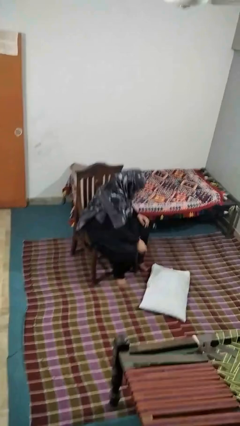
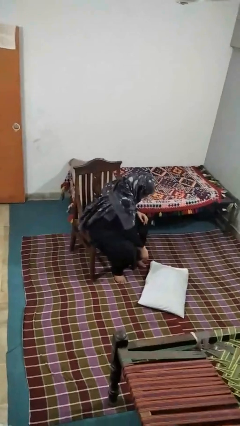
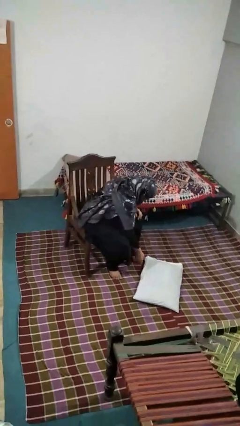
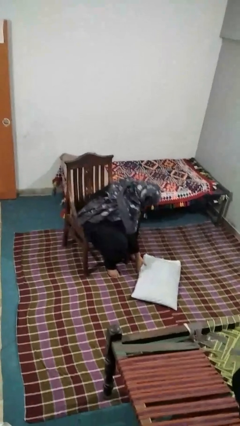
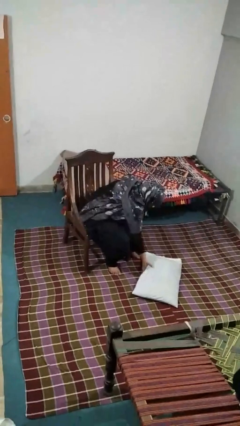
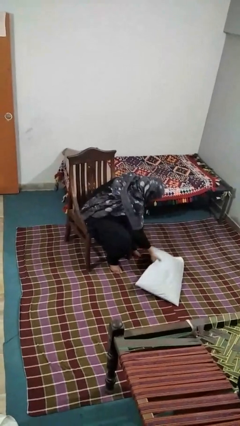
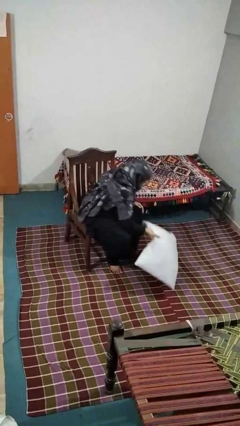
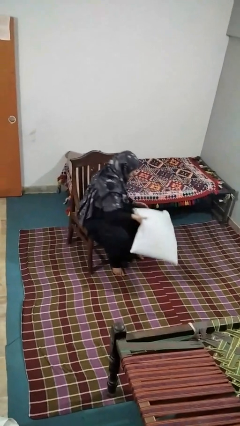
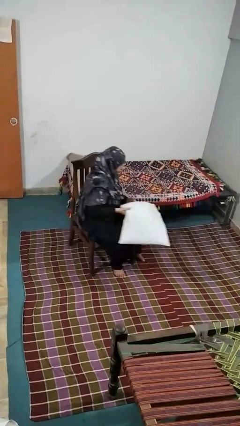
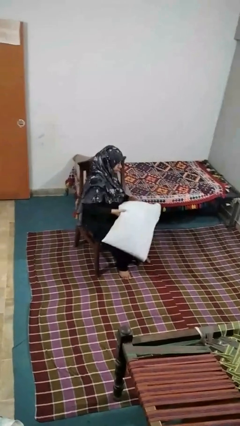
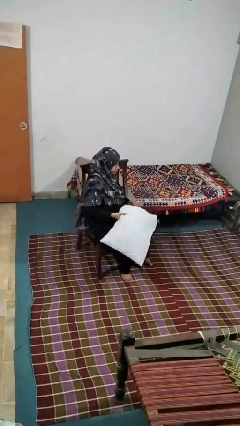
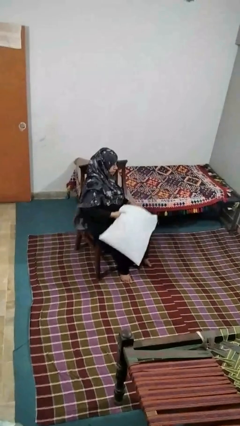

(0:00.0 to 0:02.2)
person picks up object from floor

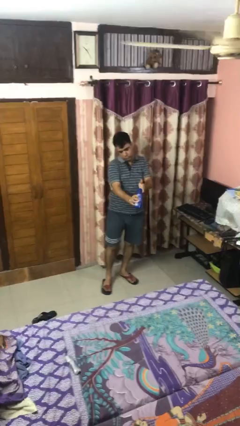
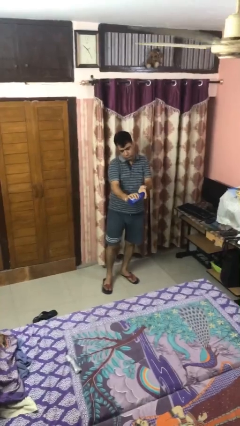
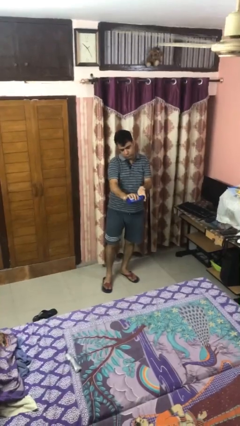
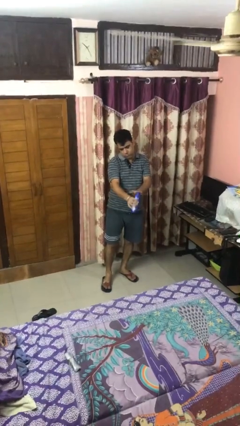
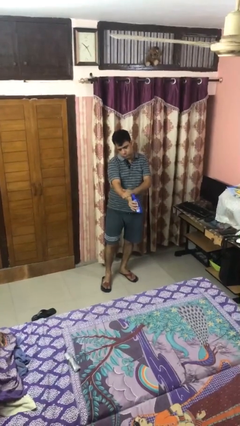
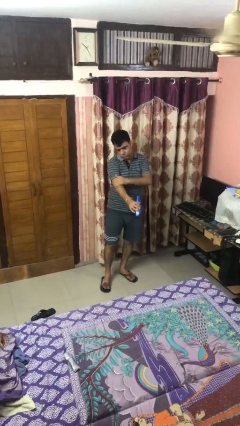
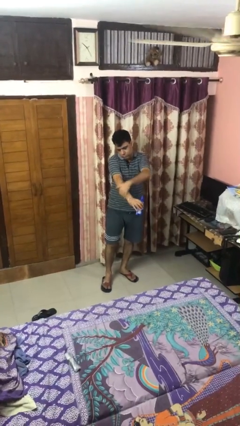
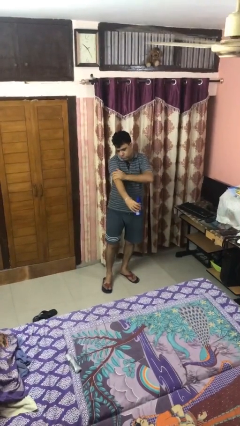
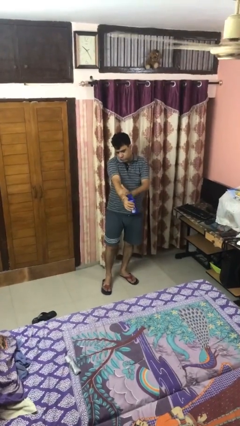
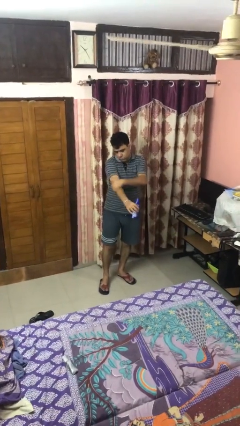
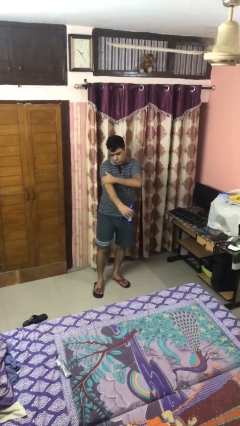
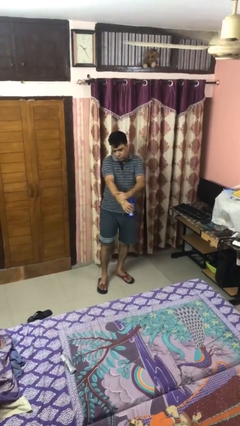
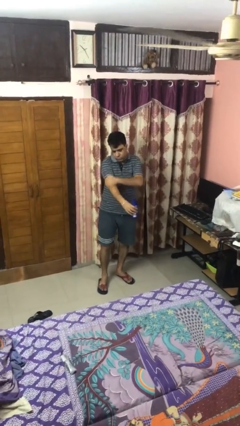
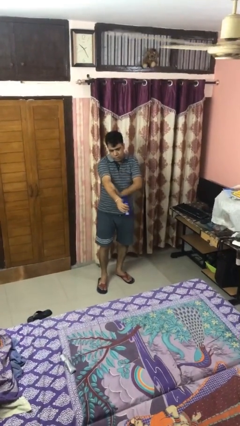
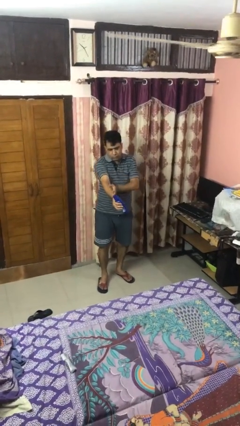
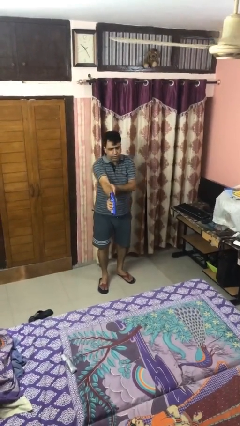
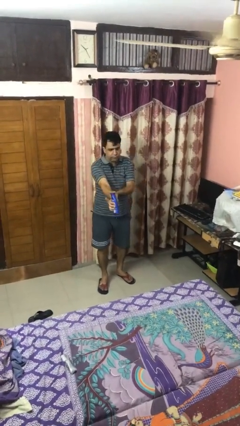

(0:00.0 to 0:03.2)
person applies sunscreen

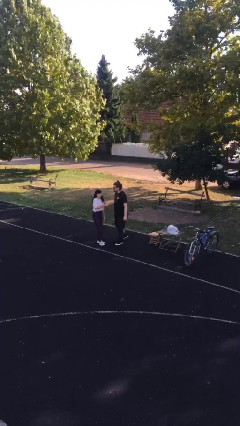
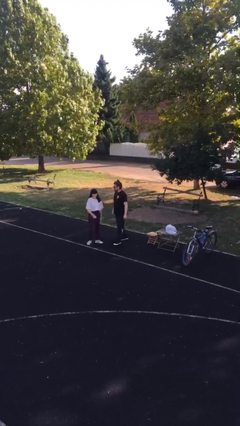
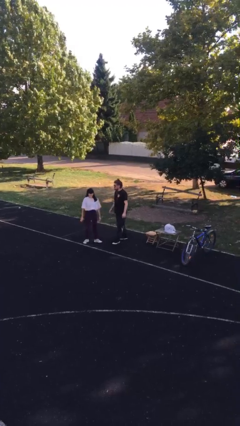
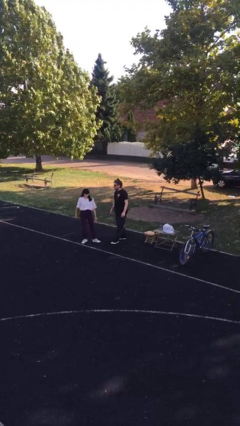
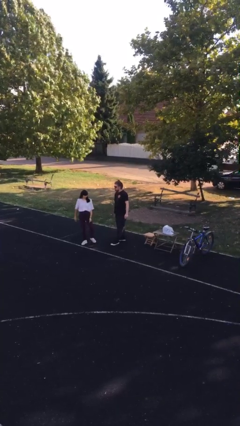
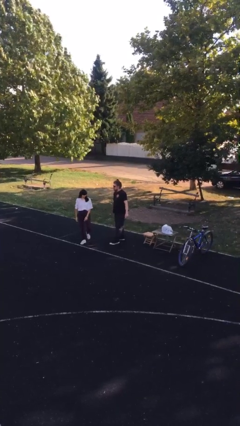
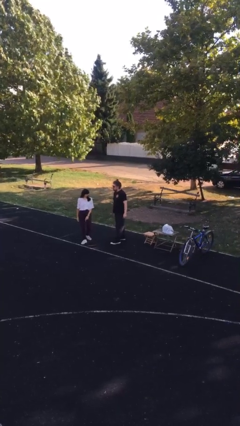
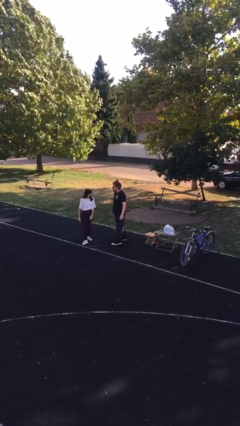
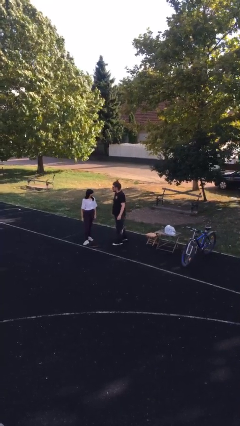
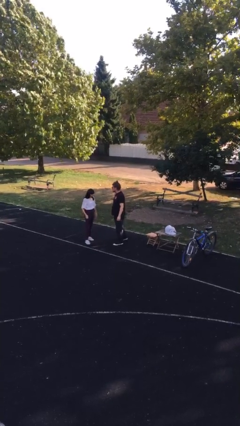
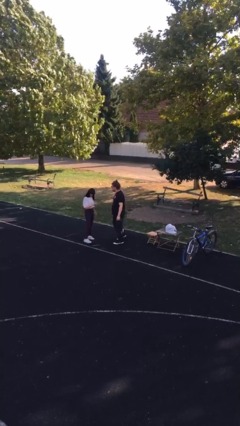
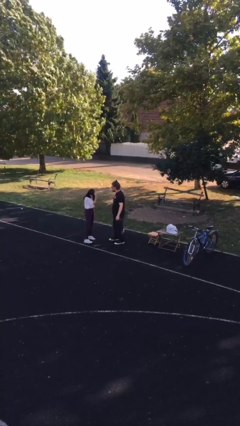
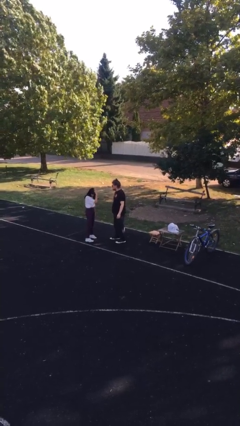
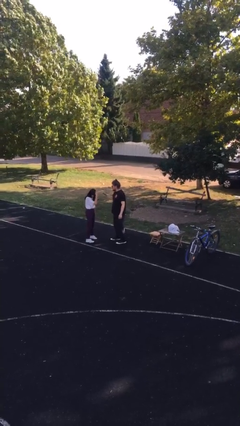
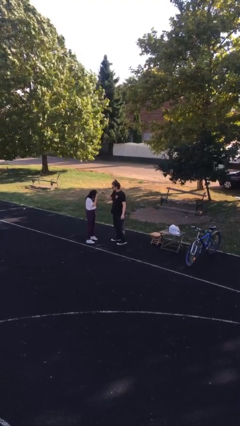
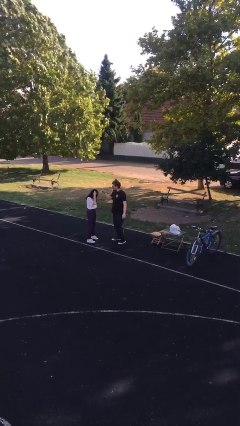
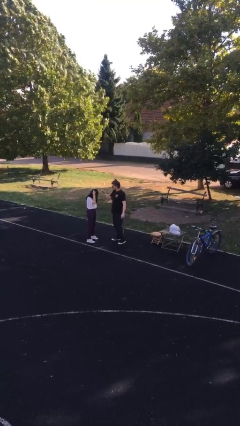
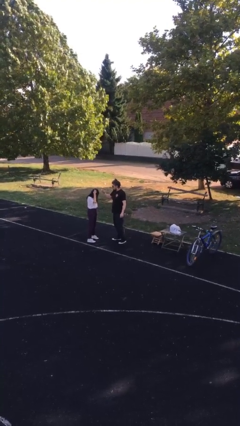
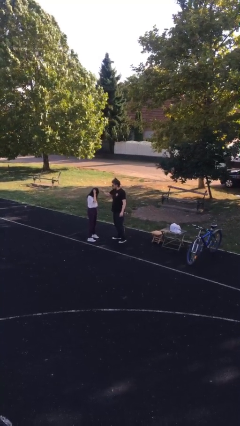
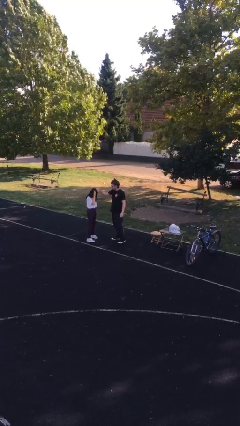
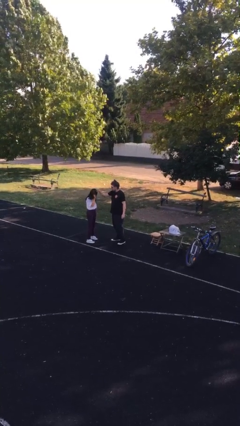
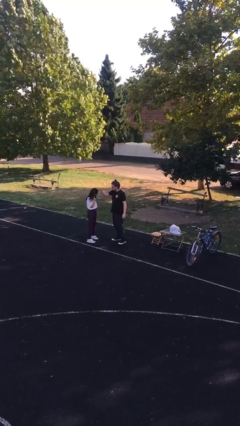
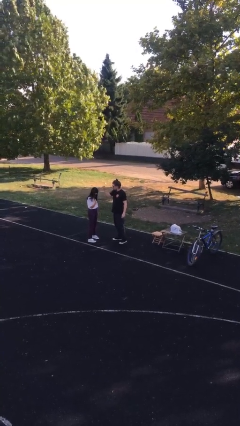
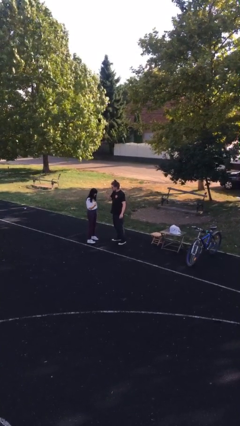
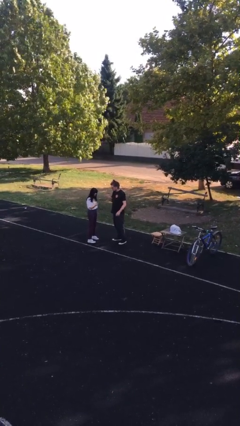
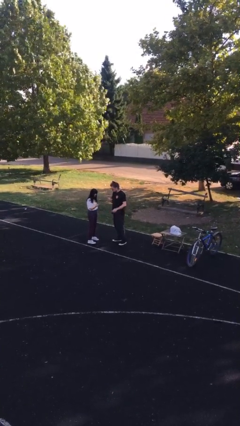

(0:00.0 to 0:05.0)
person talks to person

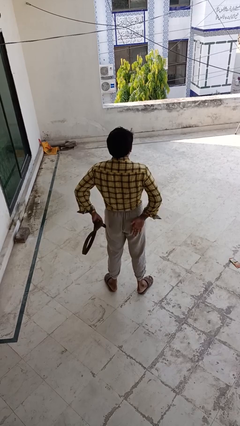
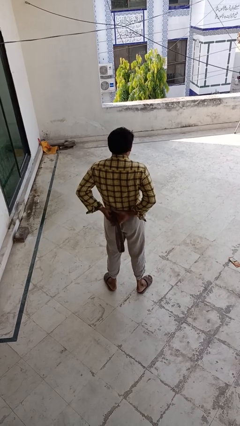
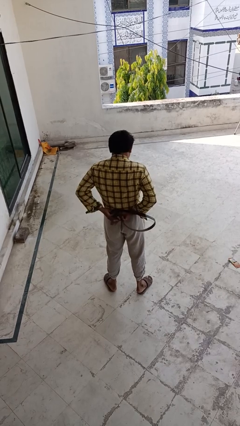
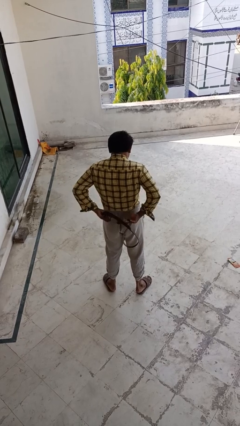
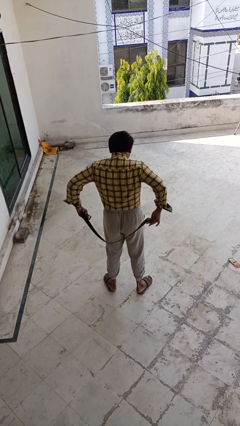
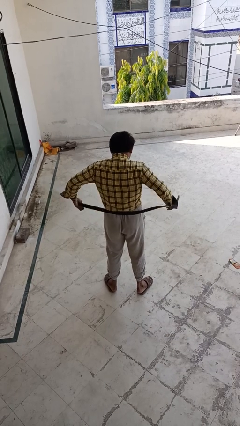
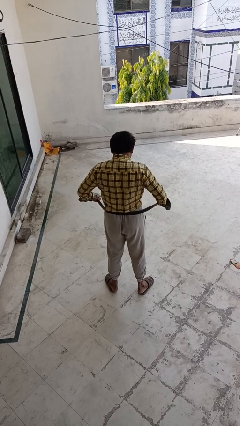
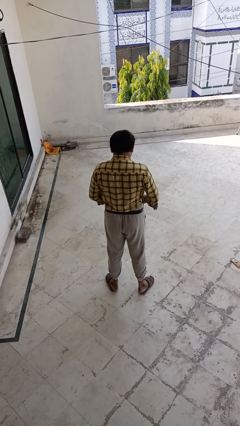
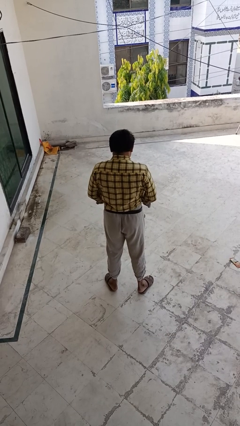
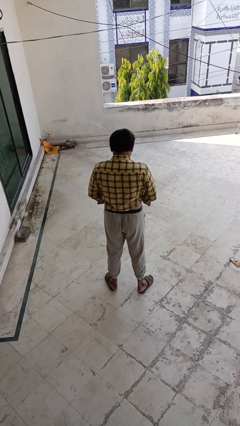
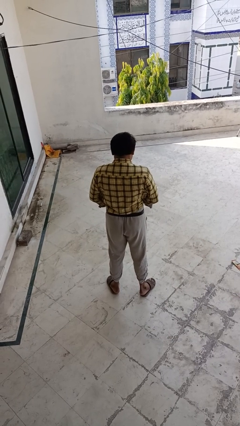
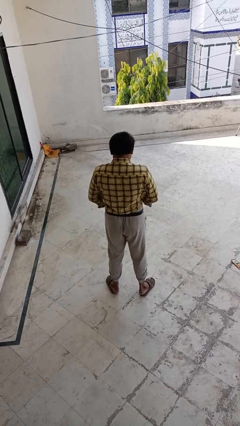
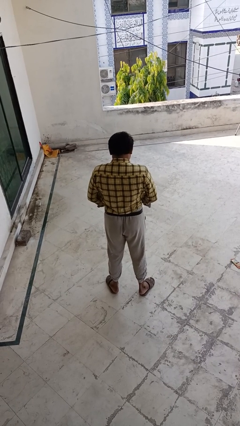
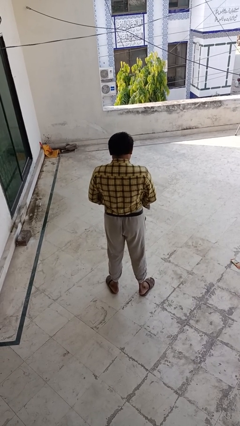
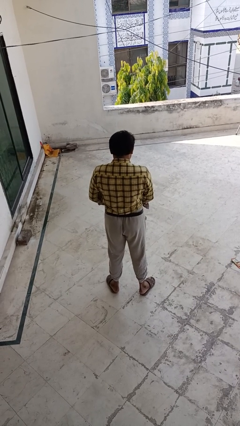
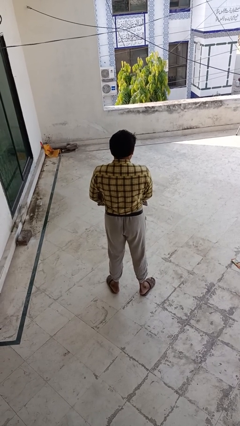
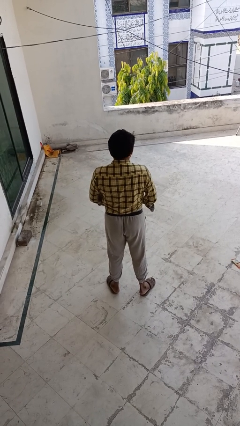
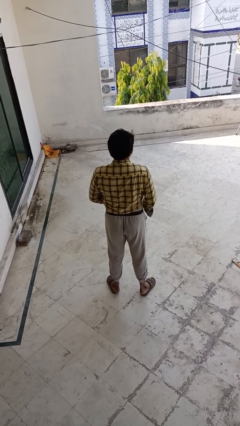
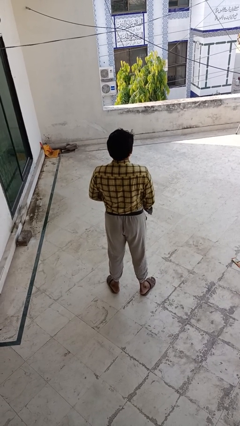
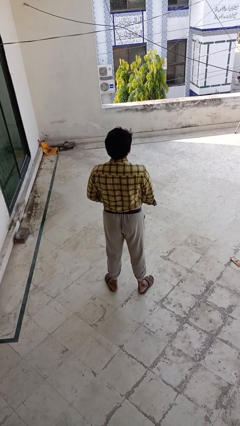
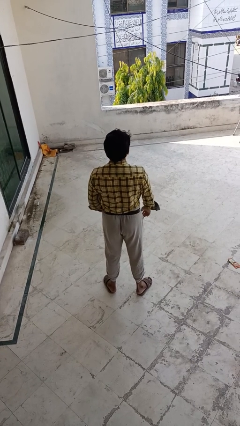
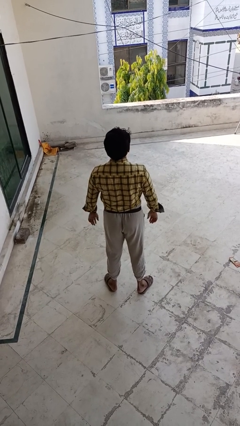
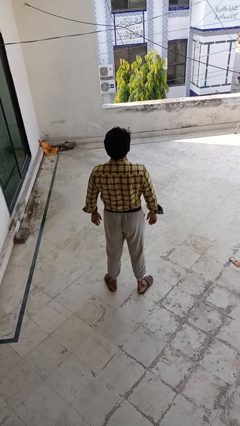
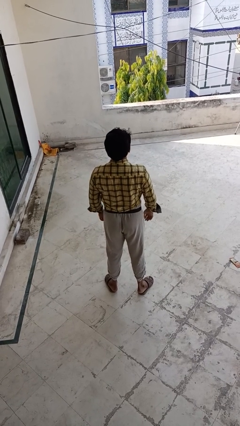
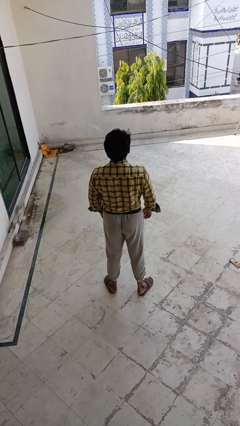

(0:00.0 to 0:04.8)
person puts on belt

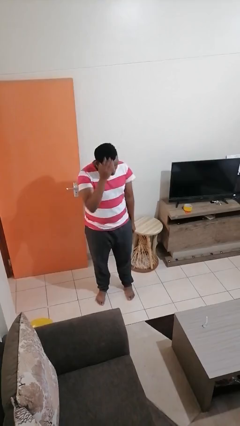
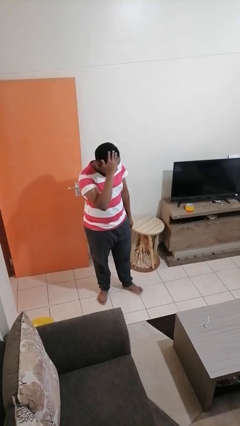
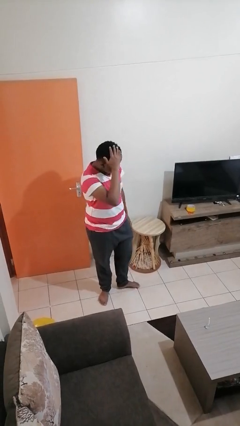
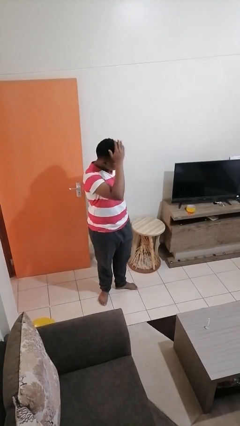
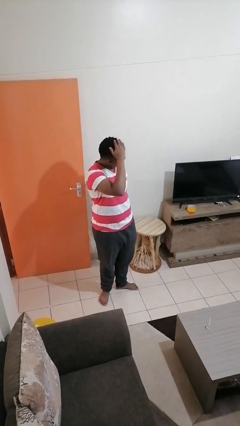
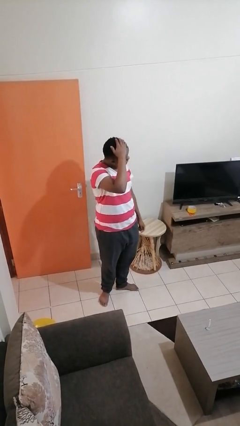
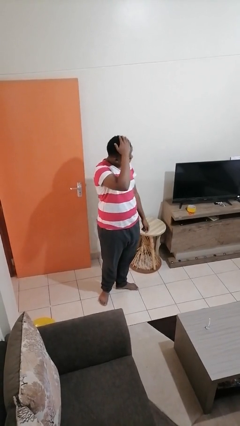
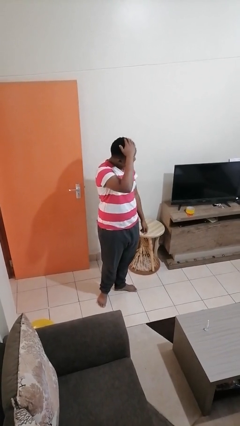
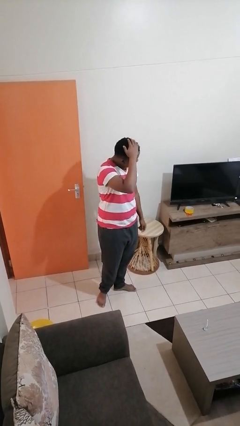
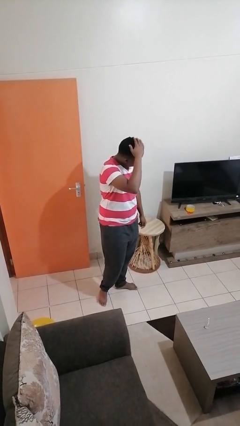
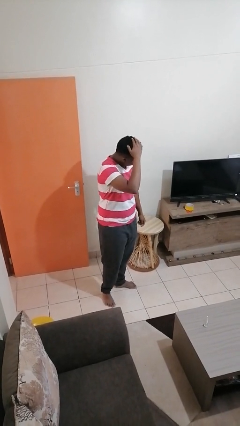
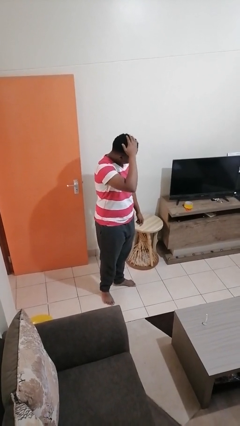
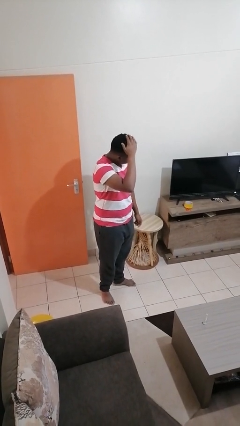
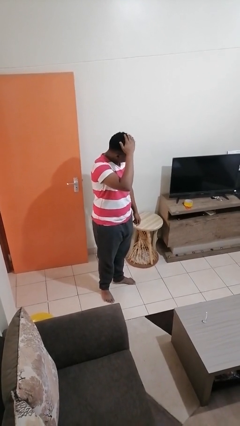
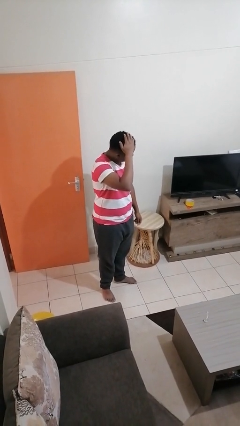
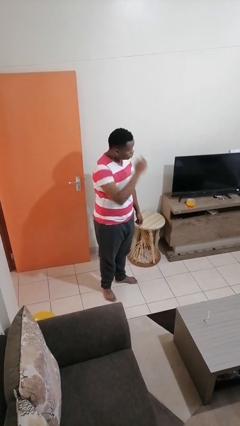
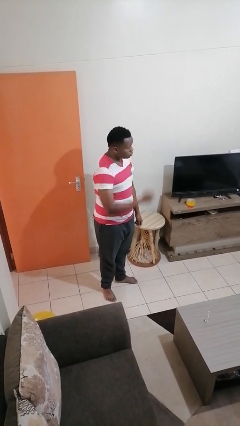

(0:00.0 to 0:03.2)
person pats head
